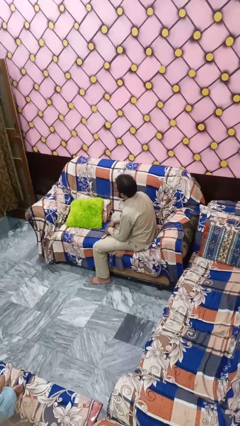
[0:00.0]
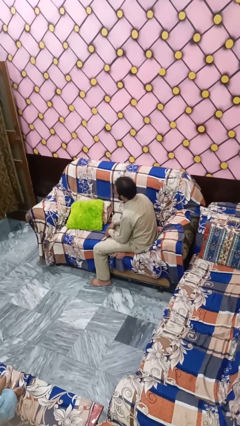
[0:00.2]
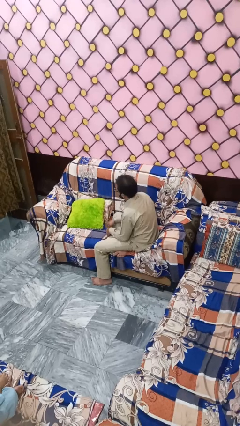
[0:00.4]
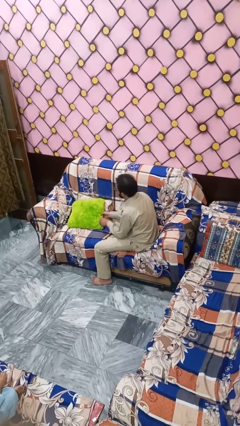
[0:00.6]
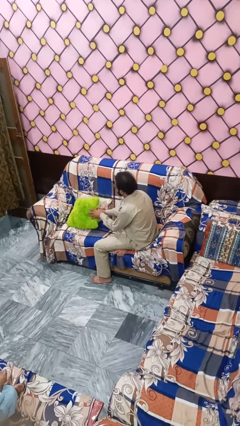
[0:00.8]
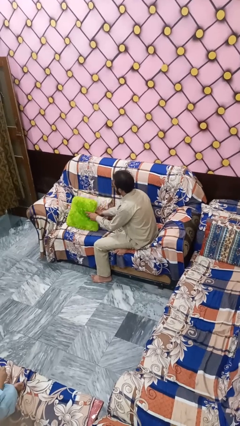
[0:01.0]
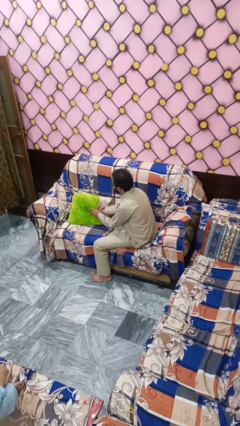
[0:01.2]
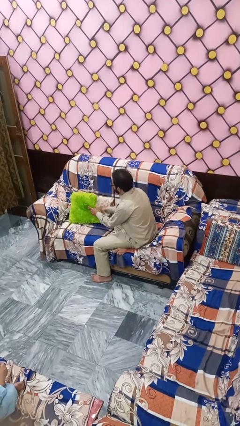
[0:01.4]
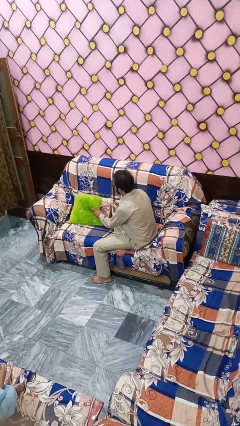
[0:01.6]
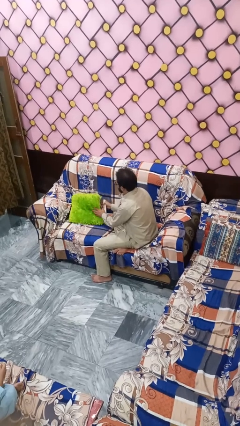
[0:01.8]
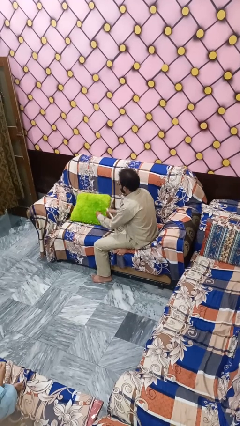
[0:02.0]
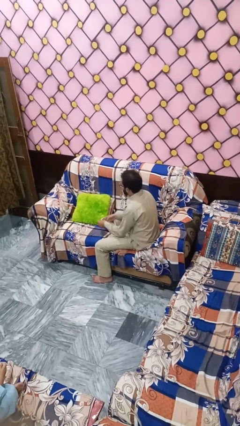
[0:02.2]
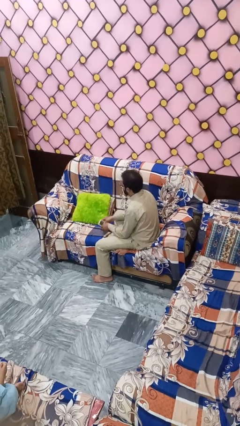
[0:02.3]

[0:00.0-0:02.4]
person searches in couch

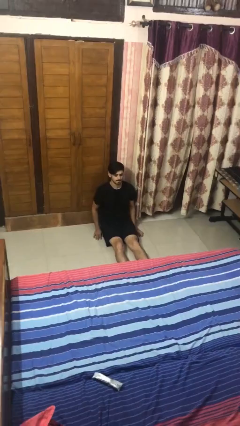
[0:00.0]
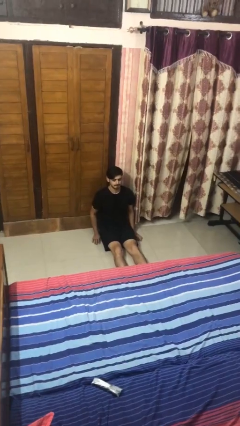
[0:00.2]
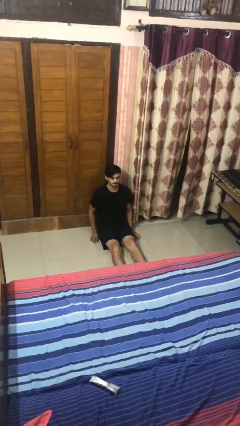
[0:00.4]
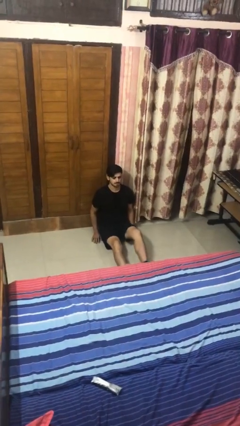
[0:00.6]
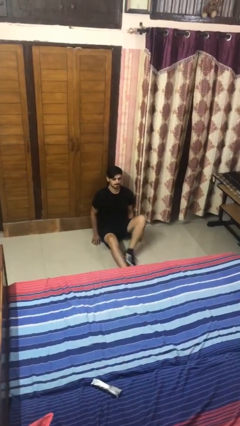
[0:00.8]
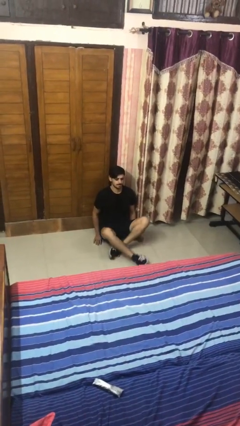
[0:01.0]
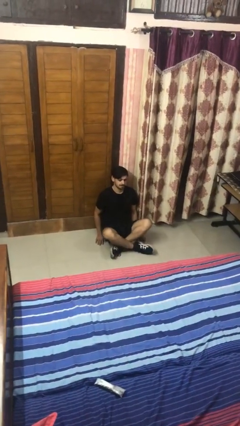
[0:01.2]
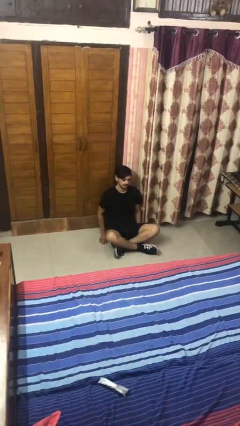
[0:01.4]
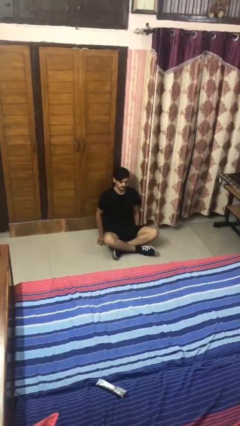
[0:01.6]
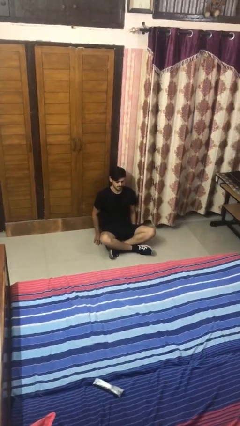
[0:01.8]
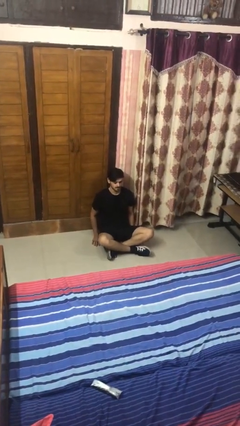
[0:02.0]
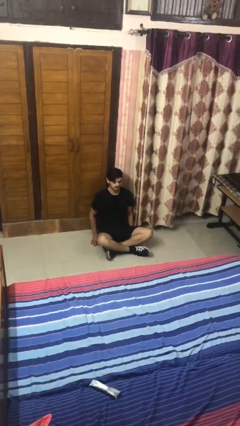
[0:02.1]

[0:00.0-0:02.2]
person crosses legs

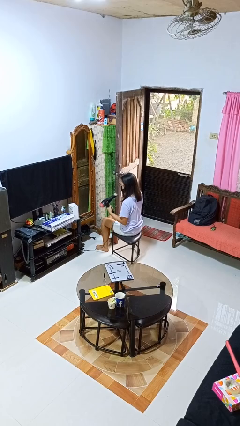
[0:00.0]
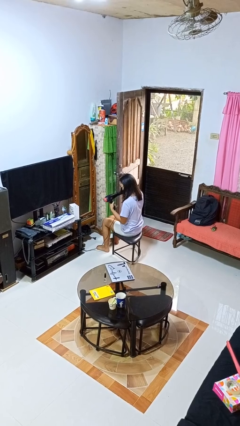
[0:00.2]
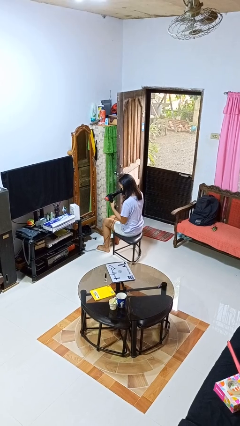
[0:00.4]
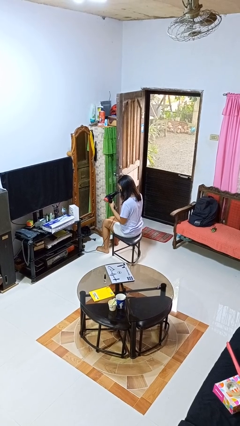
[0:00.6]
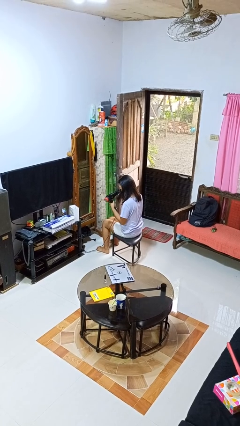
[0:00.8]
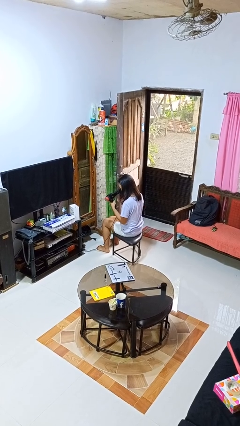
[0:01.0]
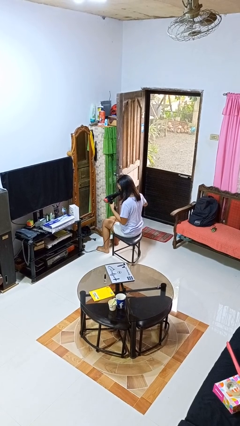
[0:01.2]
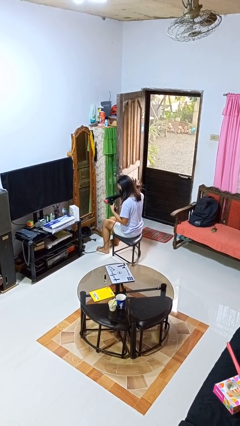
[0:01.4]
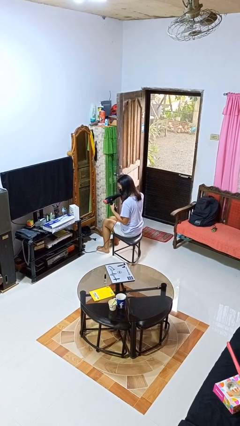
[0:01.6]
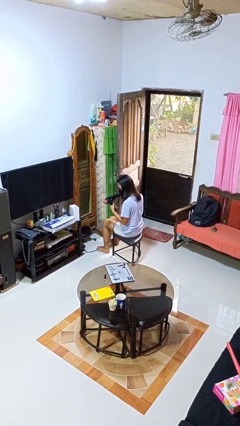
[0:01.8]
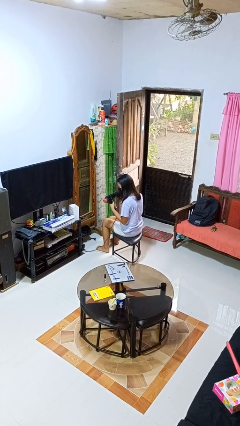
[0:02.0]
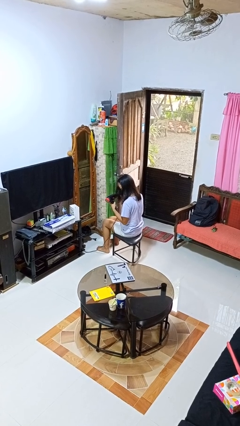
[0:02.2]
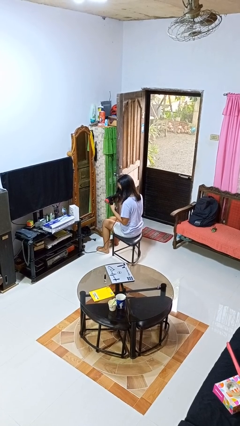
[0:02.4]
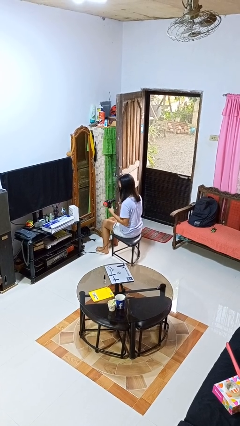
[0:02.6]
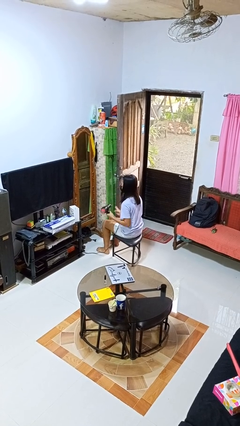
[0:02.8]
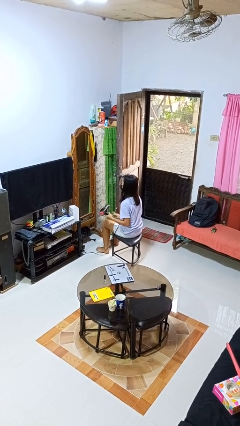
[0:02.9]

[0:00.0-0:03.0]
person dries hair with hairdryer

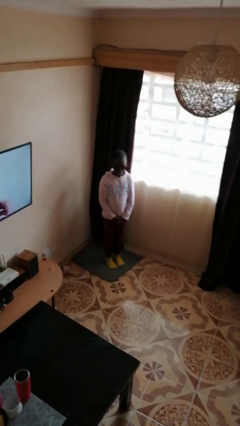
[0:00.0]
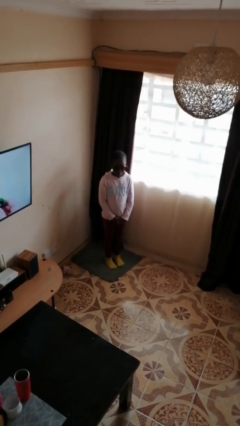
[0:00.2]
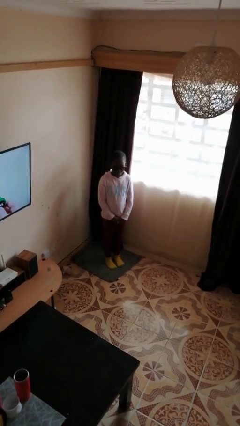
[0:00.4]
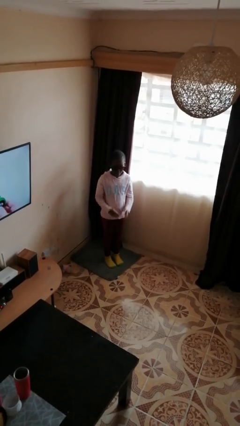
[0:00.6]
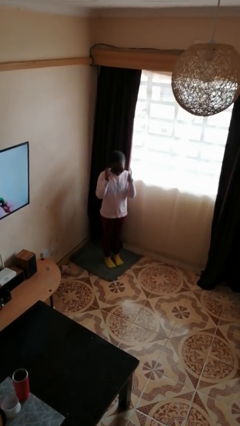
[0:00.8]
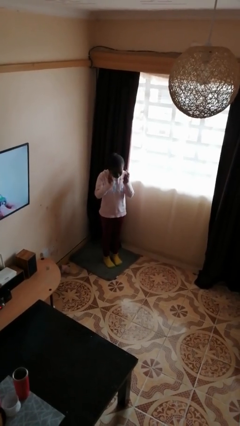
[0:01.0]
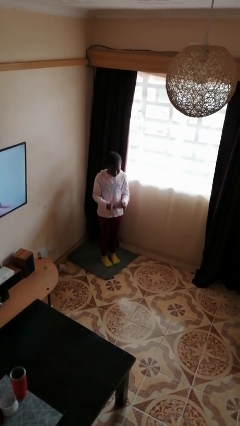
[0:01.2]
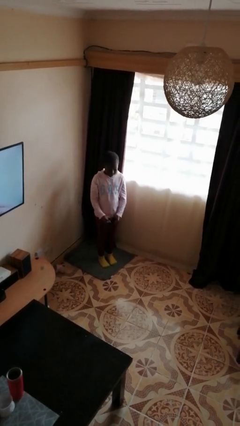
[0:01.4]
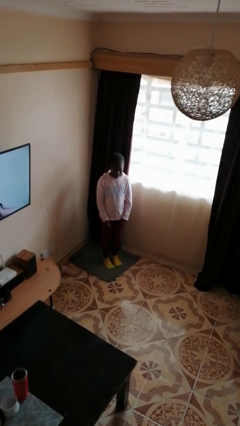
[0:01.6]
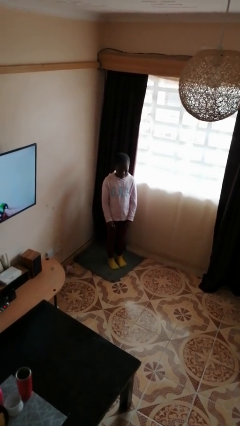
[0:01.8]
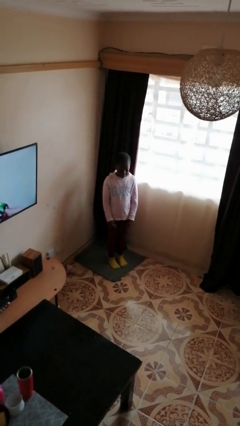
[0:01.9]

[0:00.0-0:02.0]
person takes off sunglasses

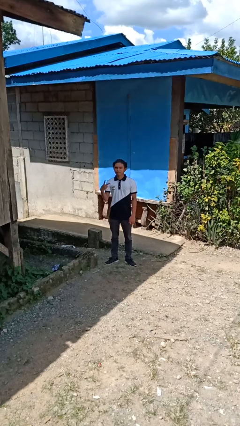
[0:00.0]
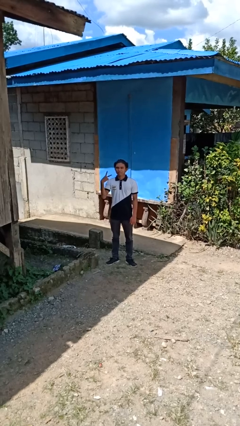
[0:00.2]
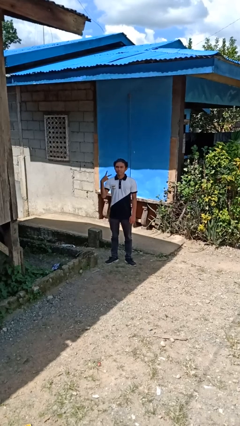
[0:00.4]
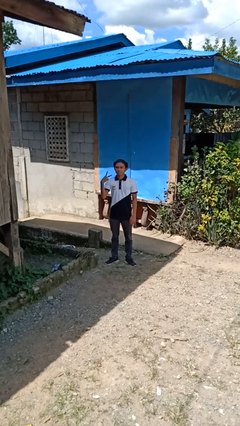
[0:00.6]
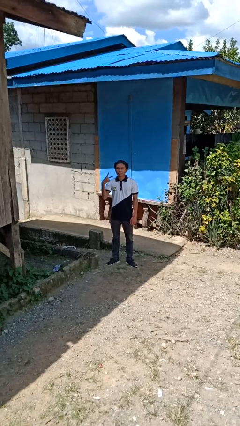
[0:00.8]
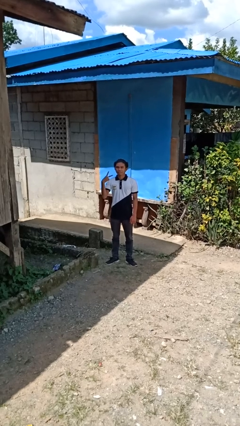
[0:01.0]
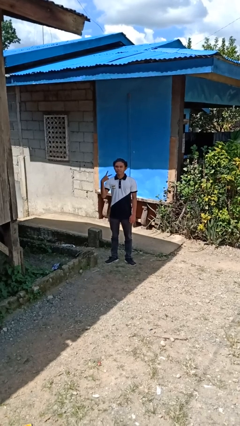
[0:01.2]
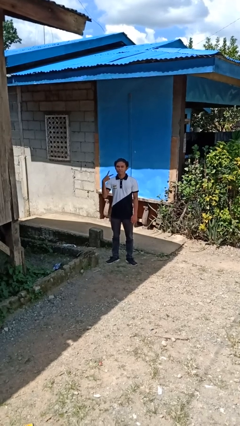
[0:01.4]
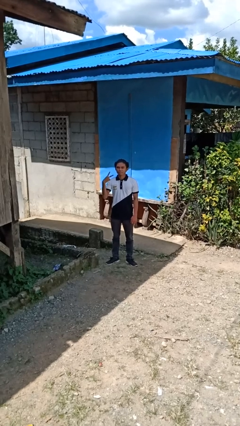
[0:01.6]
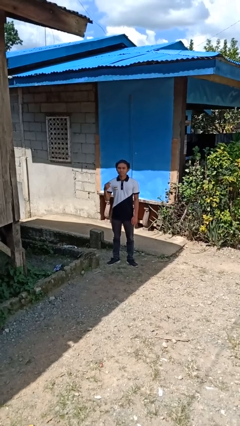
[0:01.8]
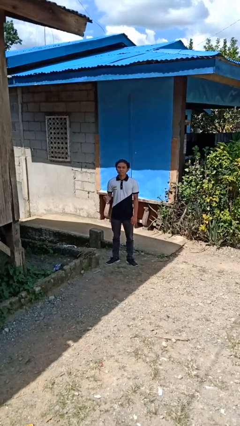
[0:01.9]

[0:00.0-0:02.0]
person gestures peace

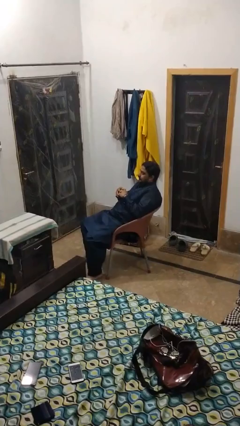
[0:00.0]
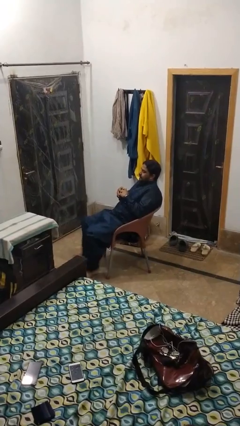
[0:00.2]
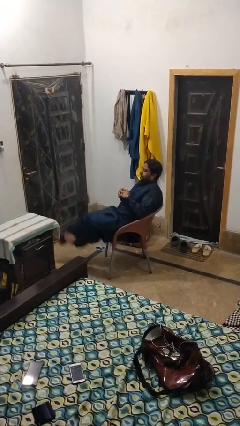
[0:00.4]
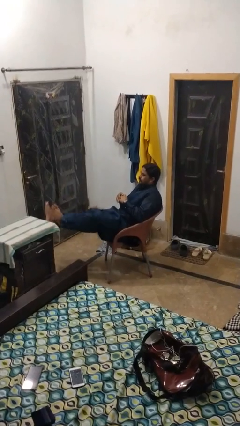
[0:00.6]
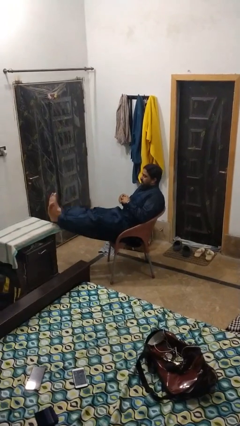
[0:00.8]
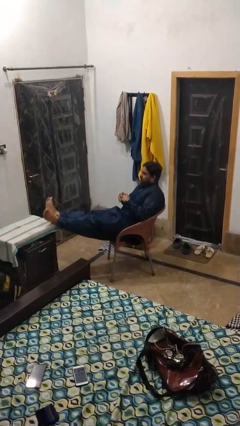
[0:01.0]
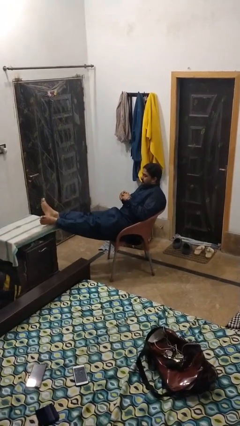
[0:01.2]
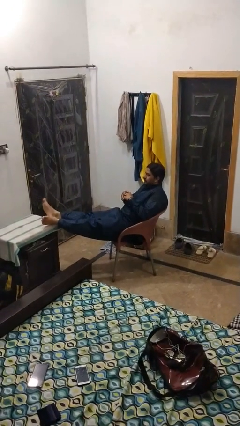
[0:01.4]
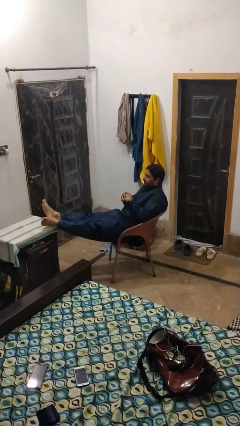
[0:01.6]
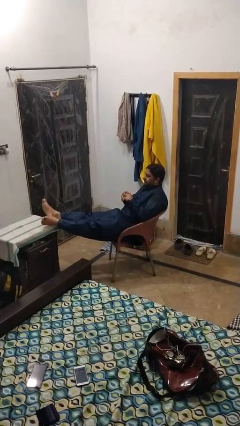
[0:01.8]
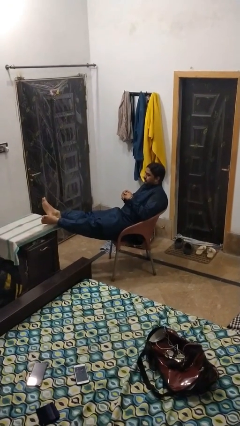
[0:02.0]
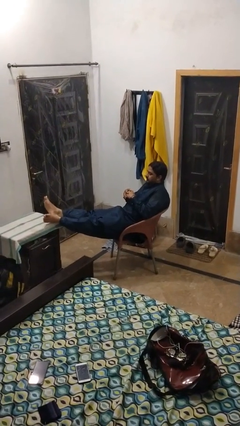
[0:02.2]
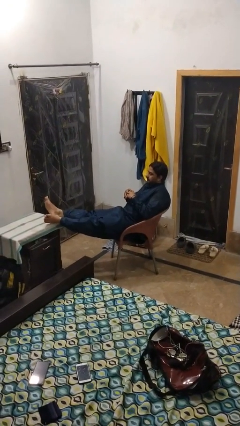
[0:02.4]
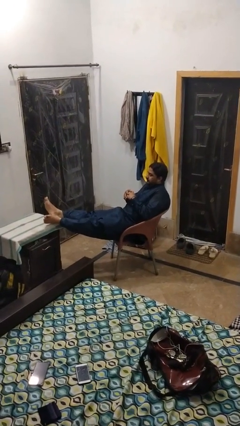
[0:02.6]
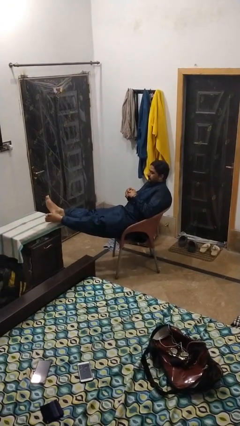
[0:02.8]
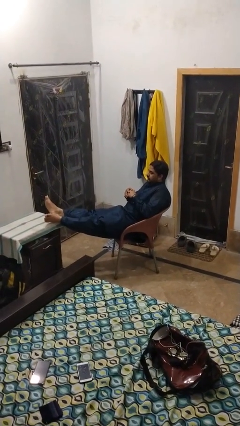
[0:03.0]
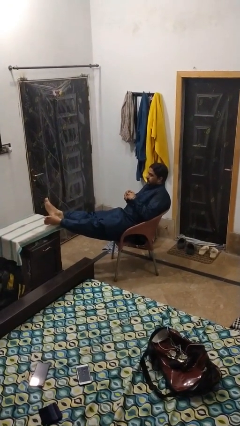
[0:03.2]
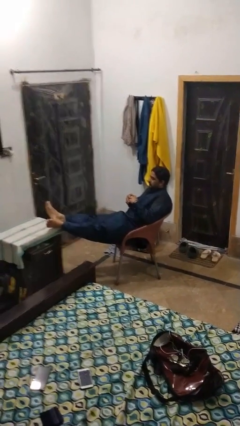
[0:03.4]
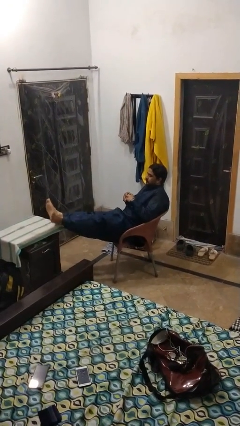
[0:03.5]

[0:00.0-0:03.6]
person puts feet up

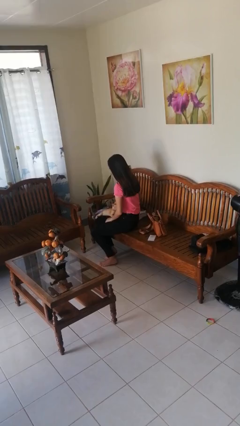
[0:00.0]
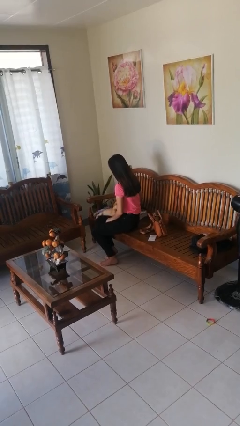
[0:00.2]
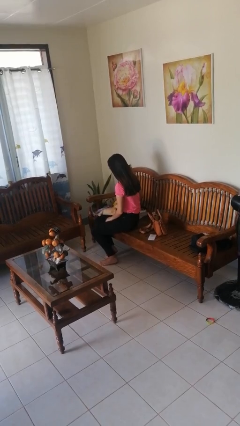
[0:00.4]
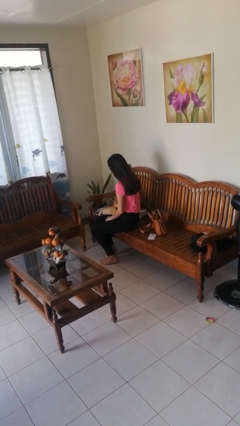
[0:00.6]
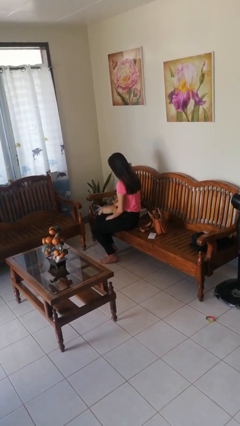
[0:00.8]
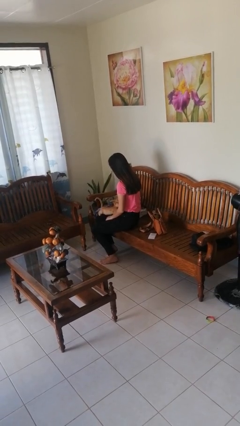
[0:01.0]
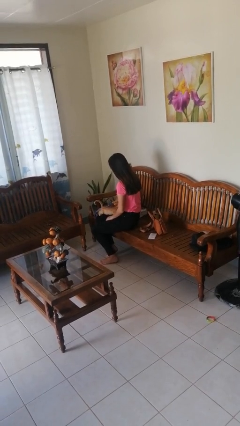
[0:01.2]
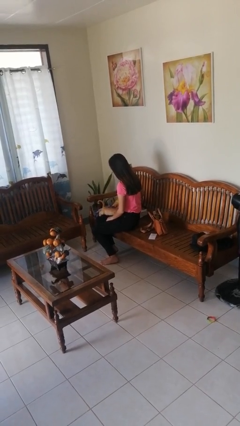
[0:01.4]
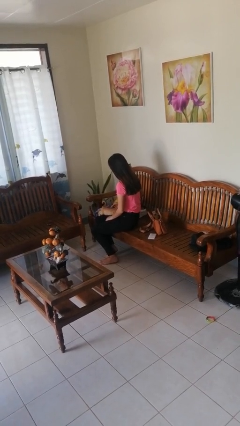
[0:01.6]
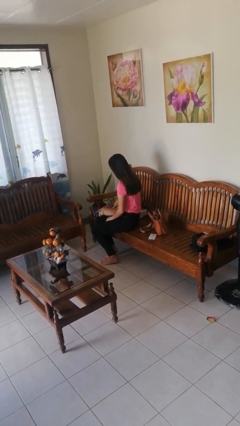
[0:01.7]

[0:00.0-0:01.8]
person pets cat
